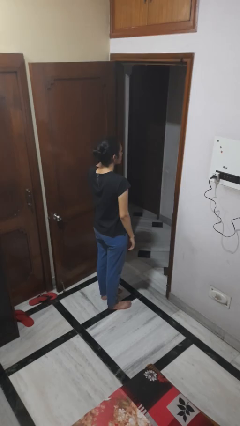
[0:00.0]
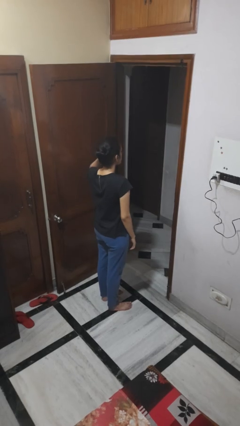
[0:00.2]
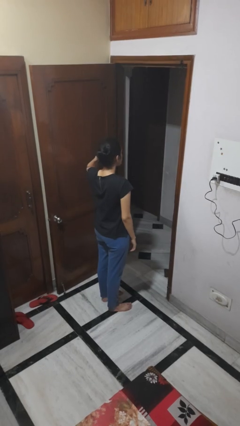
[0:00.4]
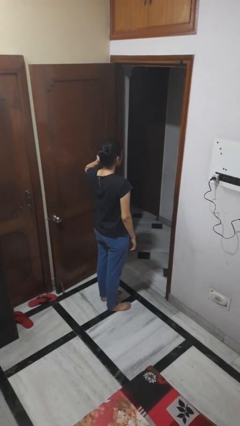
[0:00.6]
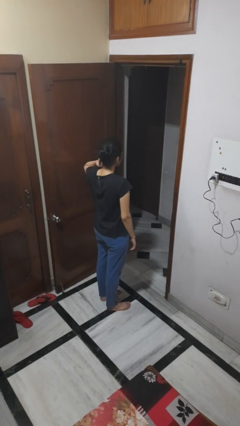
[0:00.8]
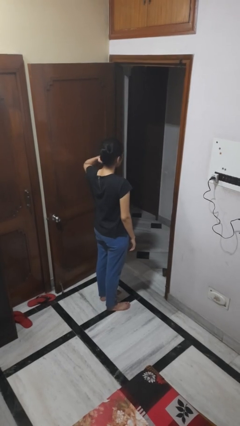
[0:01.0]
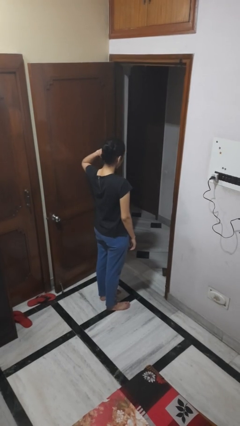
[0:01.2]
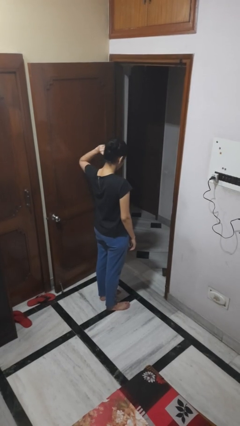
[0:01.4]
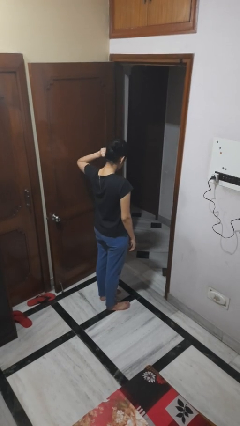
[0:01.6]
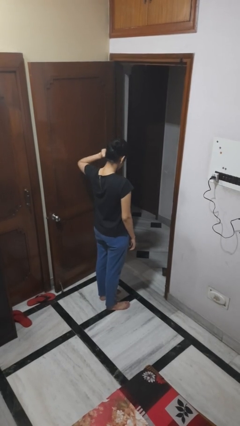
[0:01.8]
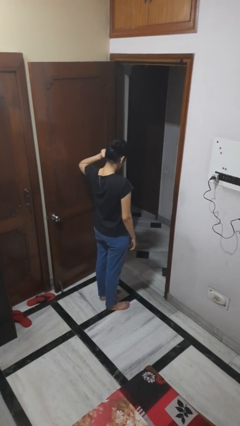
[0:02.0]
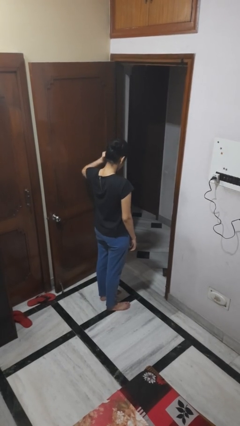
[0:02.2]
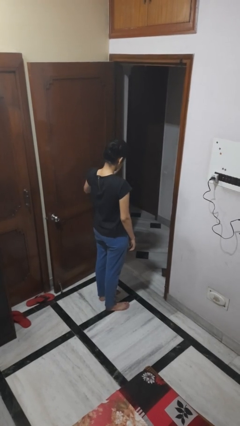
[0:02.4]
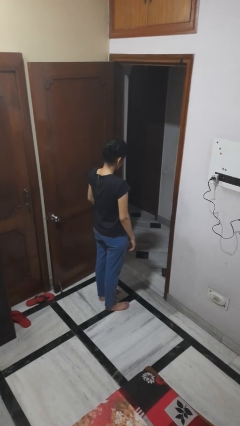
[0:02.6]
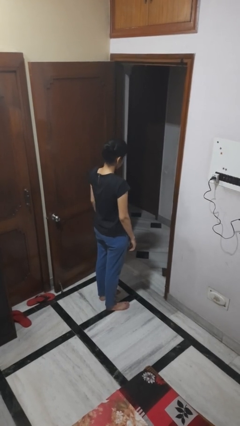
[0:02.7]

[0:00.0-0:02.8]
person puts fingers in ear

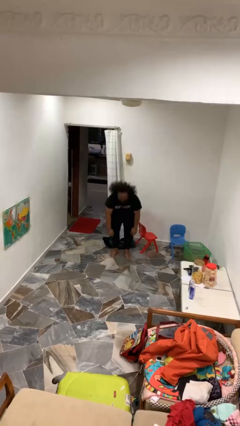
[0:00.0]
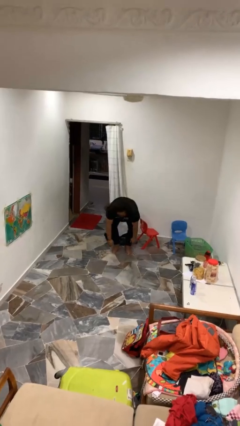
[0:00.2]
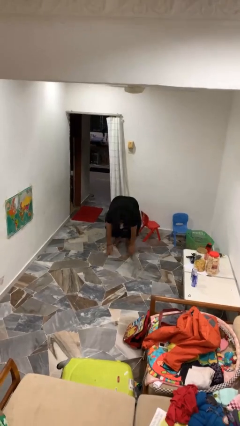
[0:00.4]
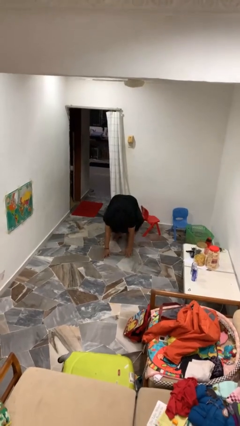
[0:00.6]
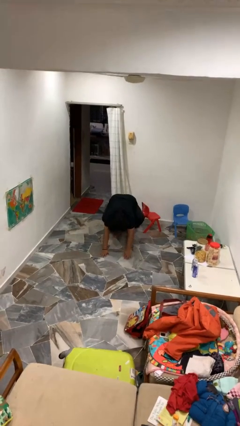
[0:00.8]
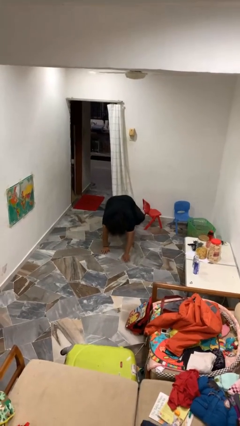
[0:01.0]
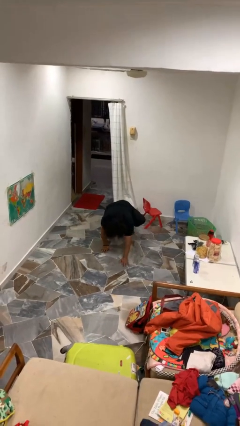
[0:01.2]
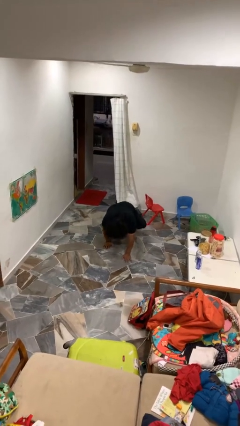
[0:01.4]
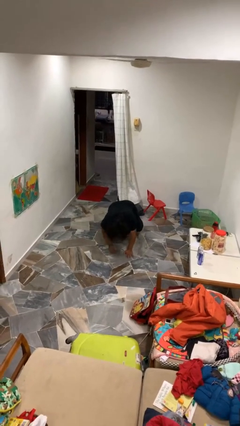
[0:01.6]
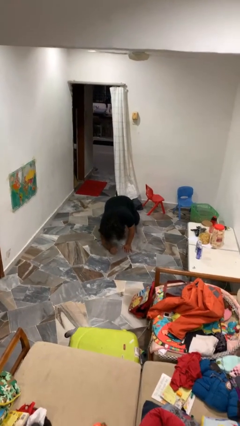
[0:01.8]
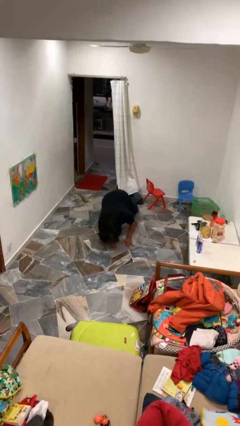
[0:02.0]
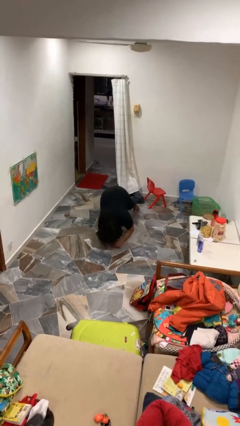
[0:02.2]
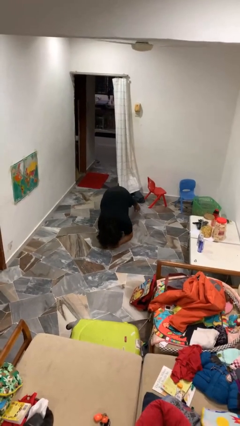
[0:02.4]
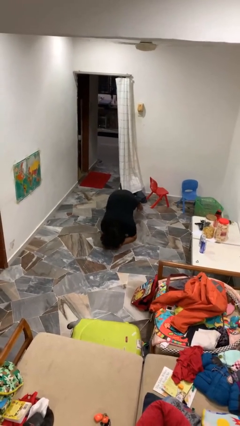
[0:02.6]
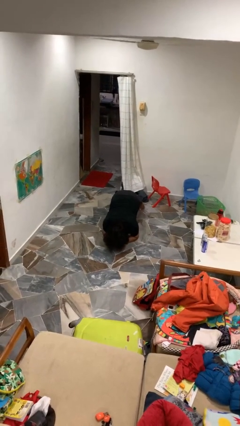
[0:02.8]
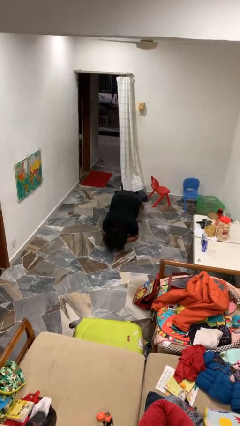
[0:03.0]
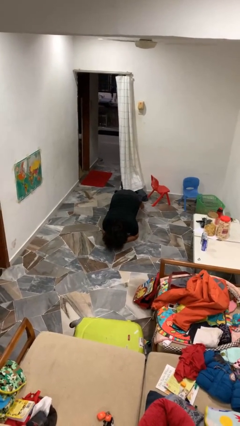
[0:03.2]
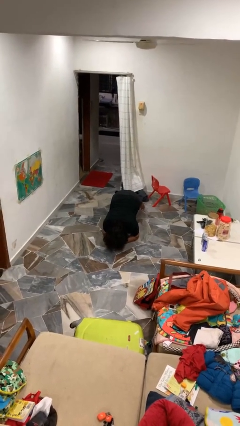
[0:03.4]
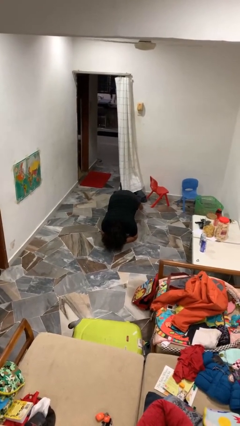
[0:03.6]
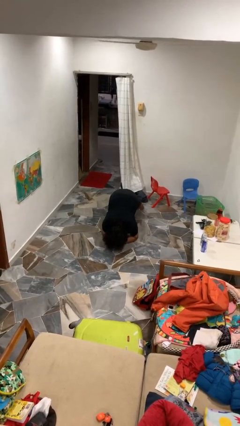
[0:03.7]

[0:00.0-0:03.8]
person exercises with plank

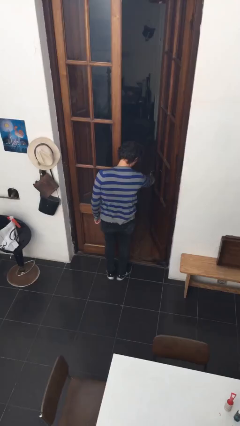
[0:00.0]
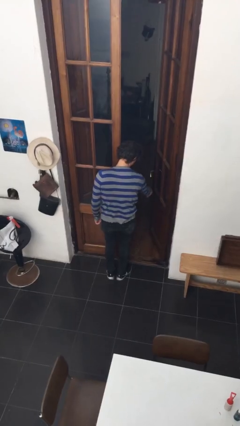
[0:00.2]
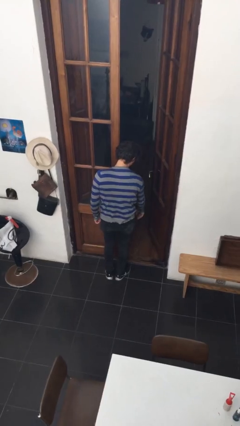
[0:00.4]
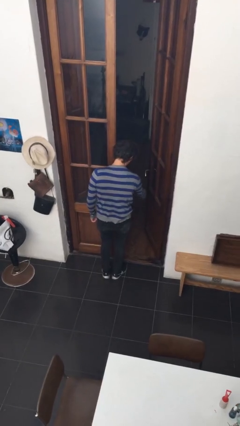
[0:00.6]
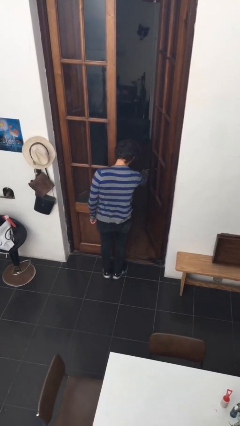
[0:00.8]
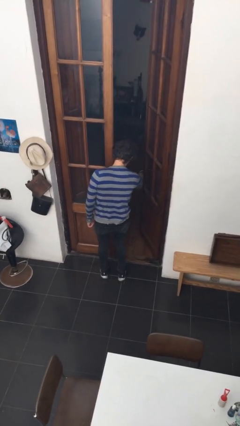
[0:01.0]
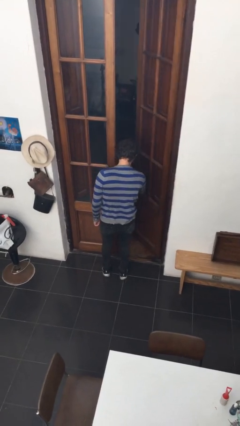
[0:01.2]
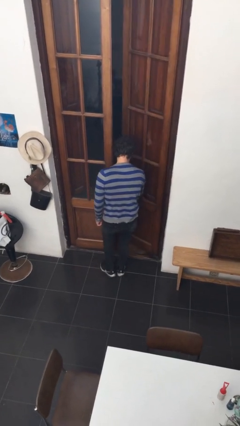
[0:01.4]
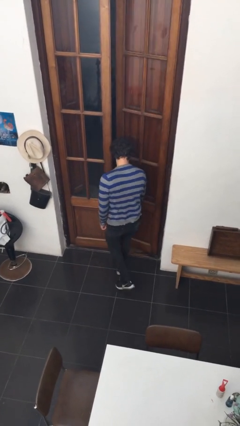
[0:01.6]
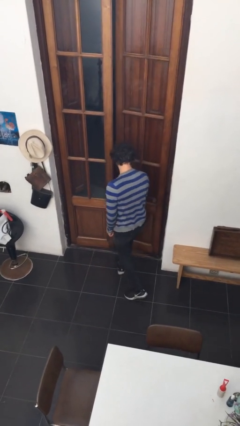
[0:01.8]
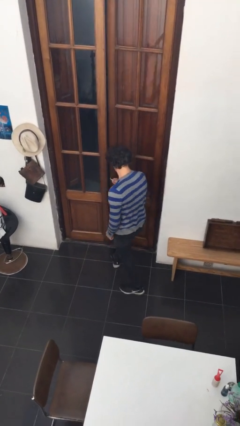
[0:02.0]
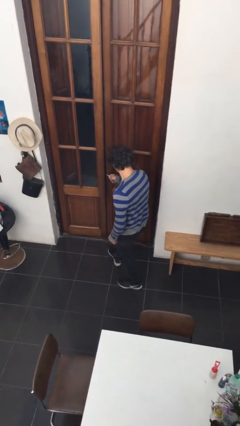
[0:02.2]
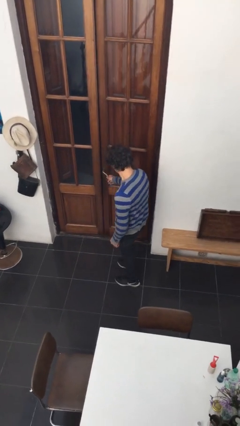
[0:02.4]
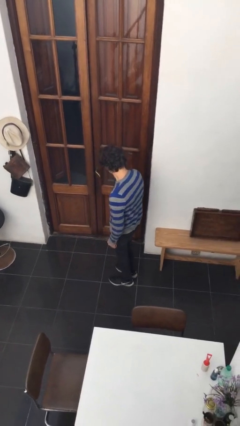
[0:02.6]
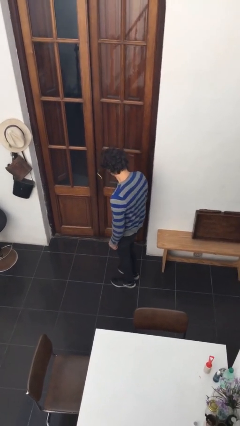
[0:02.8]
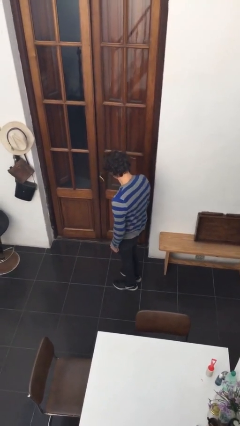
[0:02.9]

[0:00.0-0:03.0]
person closes facility door

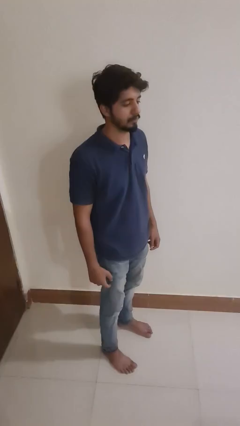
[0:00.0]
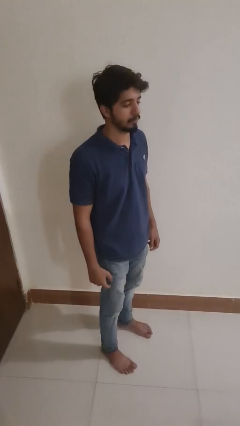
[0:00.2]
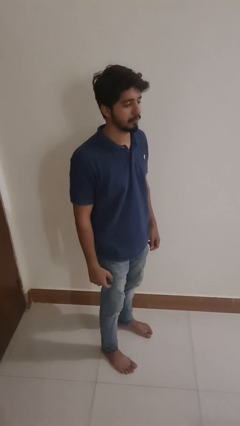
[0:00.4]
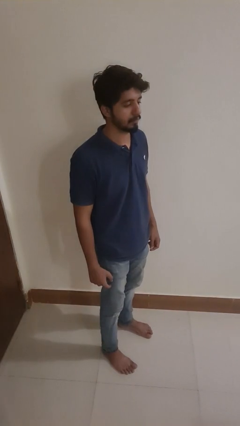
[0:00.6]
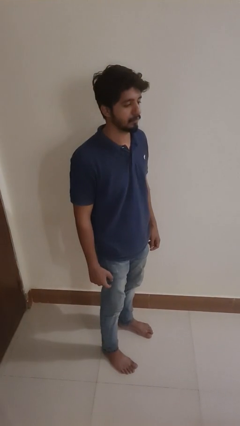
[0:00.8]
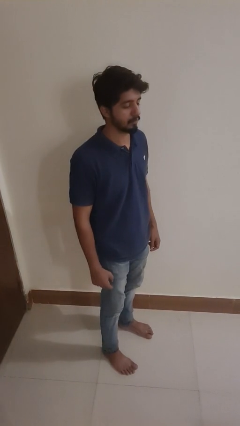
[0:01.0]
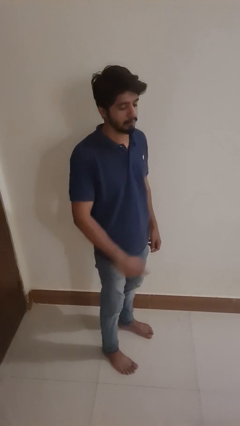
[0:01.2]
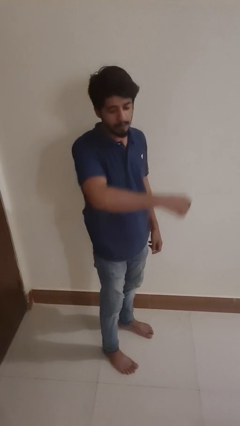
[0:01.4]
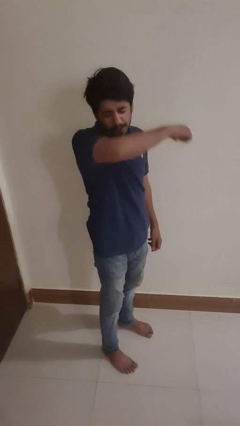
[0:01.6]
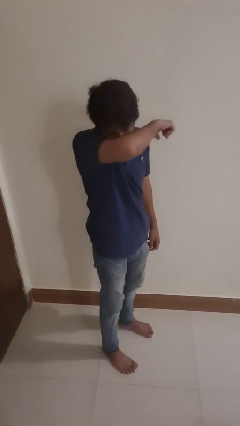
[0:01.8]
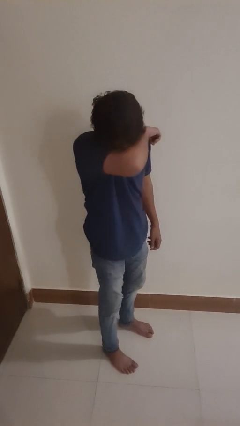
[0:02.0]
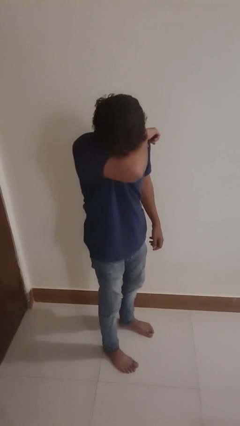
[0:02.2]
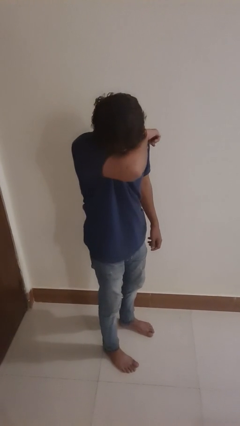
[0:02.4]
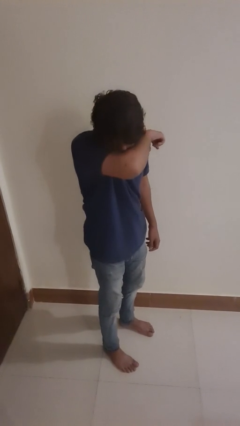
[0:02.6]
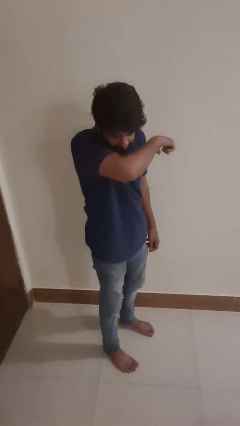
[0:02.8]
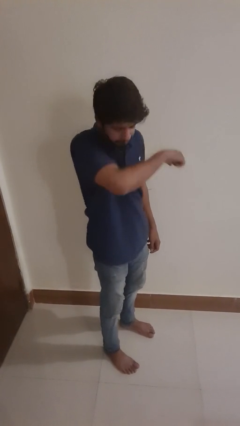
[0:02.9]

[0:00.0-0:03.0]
person sneezes into arm

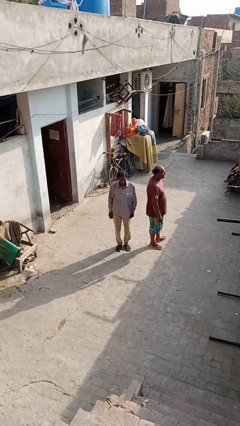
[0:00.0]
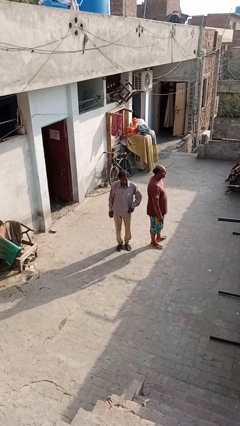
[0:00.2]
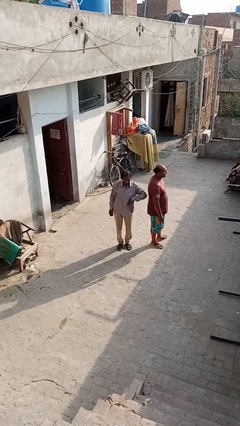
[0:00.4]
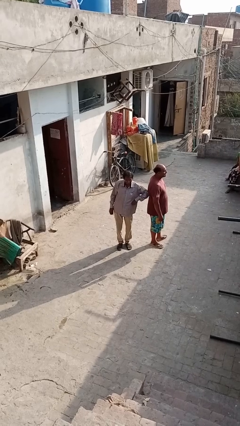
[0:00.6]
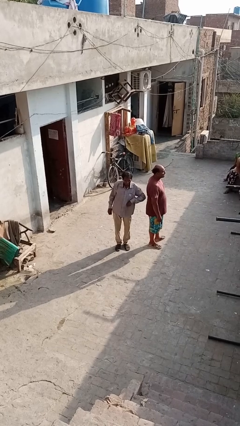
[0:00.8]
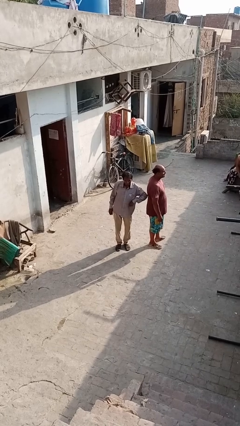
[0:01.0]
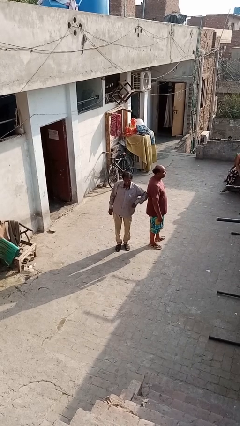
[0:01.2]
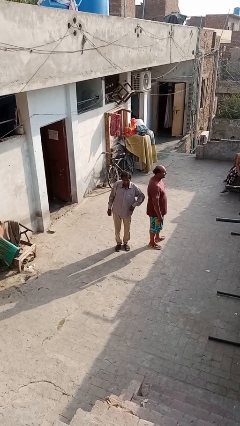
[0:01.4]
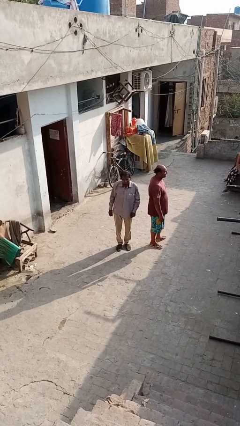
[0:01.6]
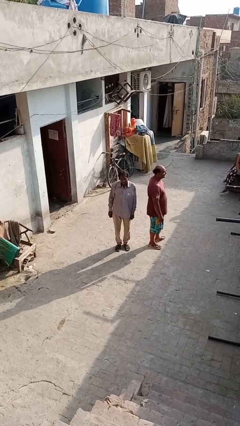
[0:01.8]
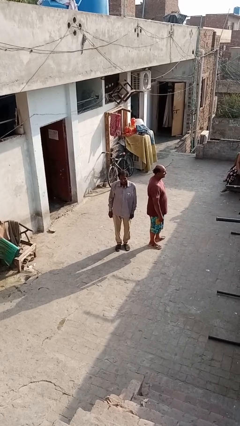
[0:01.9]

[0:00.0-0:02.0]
person nudges person with elbow

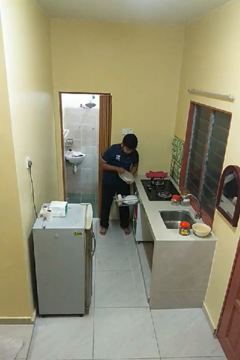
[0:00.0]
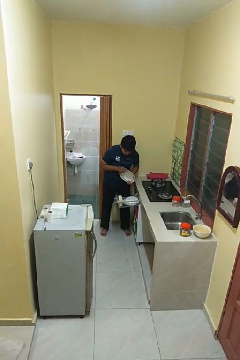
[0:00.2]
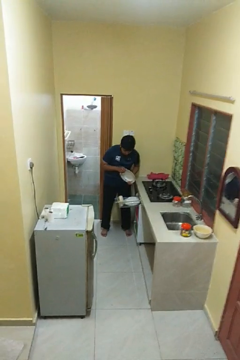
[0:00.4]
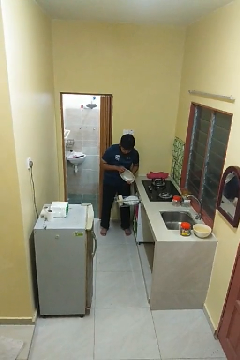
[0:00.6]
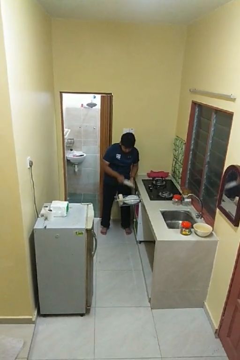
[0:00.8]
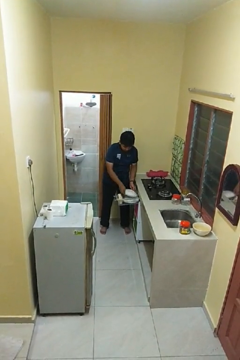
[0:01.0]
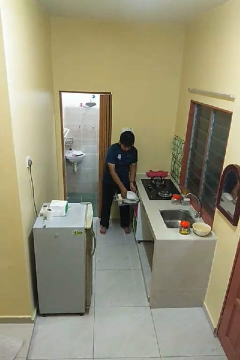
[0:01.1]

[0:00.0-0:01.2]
person puts object into kitchen drawer

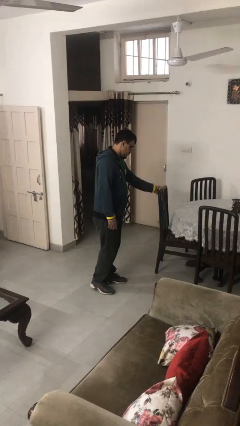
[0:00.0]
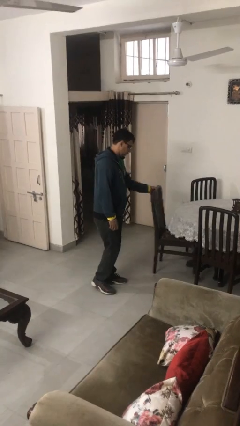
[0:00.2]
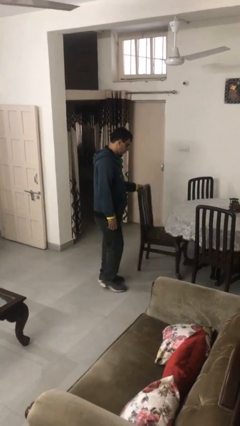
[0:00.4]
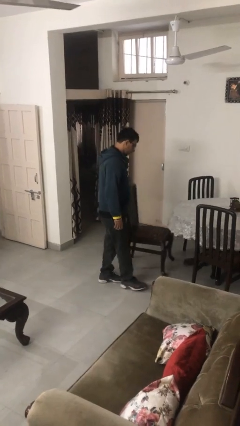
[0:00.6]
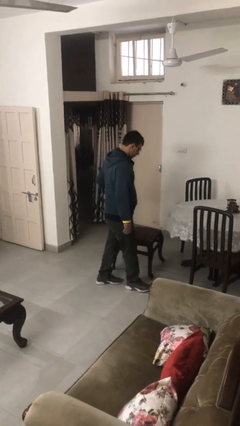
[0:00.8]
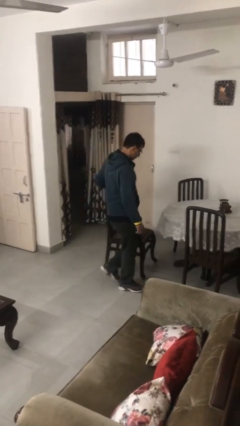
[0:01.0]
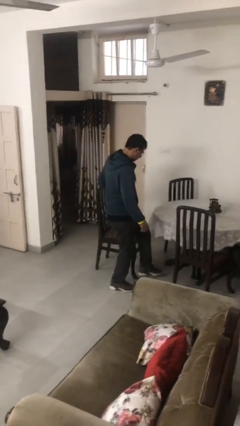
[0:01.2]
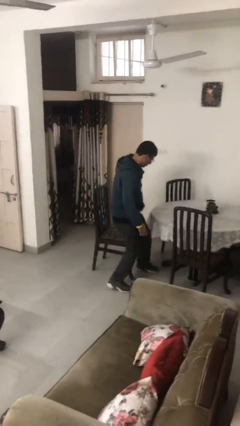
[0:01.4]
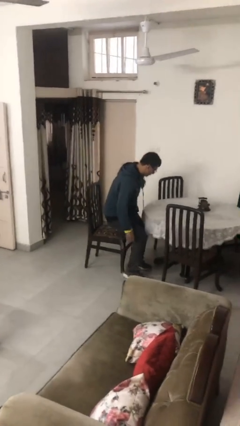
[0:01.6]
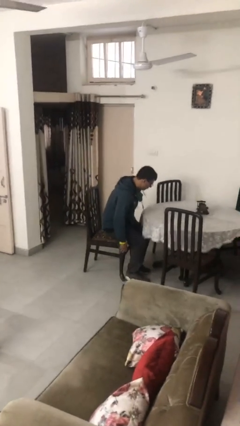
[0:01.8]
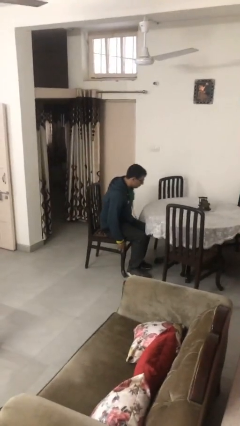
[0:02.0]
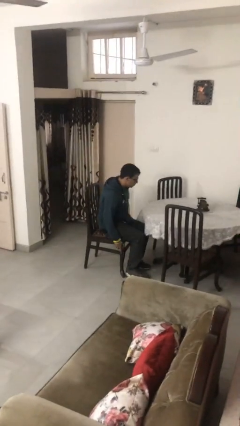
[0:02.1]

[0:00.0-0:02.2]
person sits down
